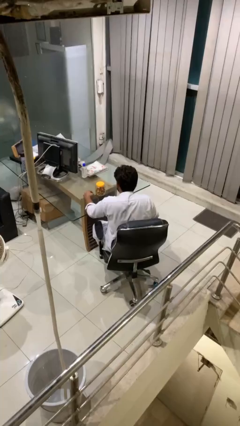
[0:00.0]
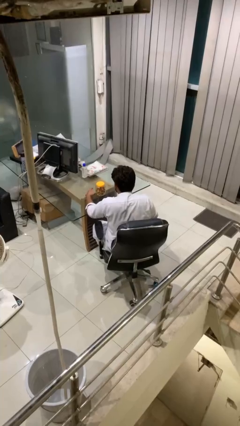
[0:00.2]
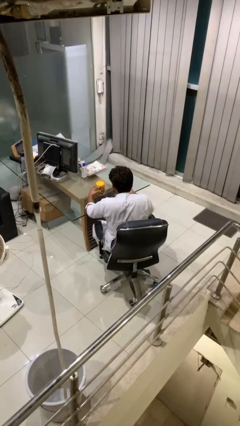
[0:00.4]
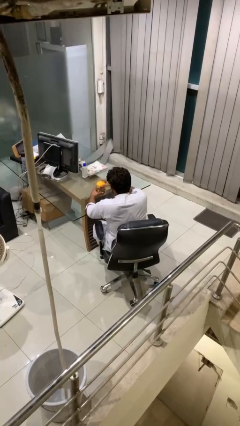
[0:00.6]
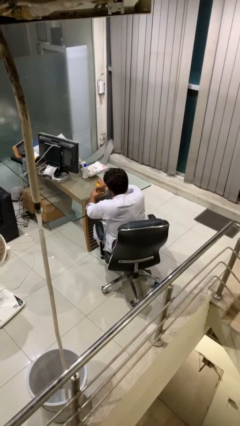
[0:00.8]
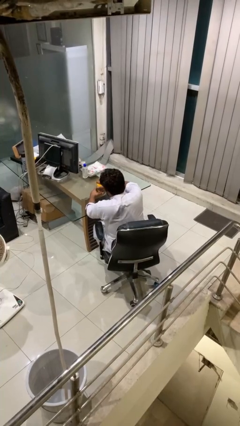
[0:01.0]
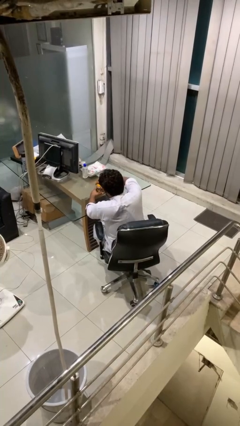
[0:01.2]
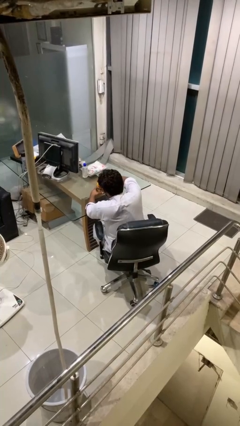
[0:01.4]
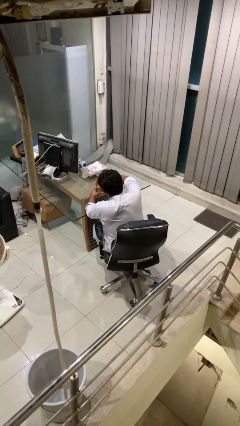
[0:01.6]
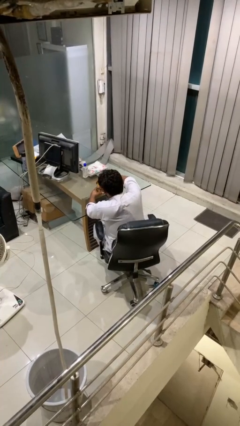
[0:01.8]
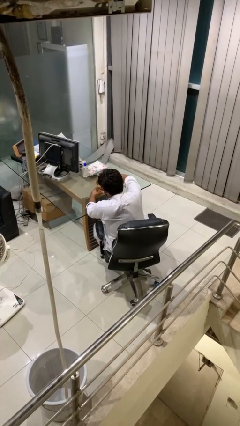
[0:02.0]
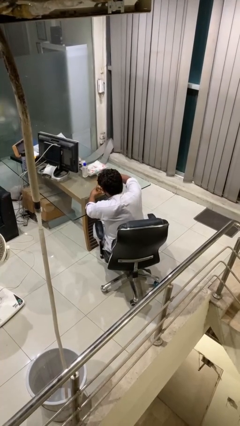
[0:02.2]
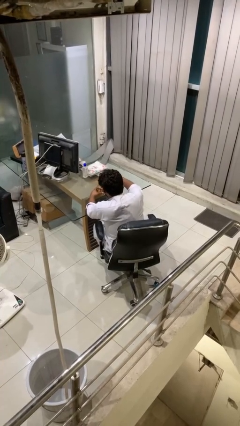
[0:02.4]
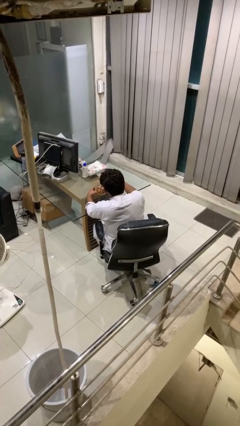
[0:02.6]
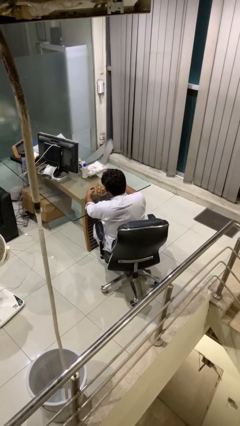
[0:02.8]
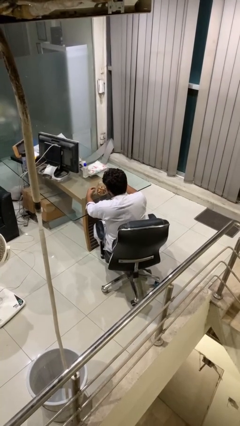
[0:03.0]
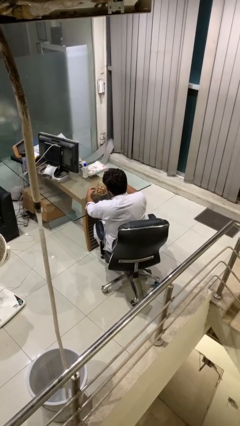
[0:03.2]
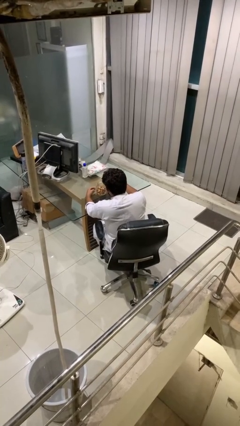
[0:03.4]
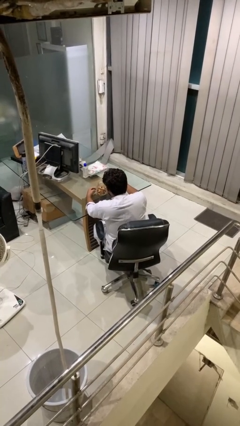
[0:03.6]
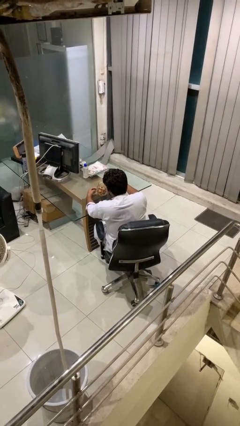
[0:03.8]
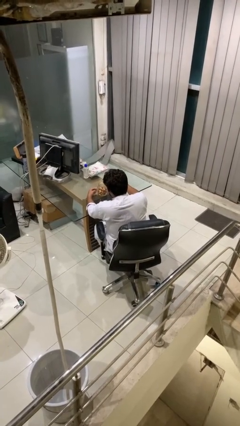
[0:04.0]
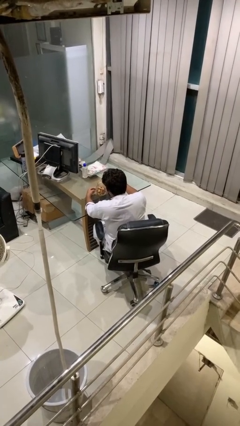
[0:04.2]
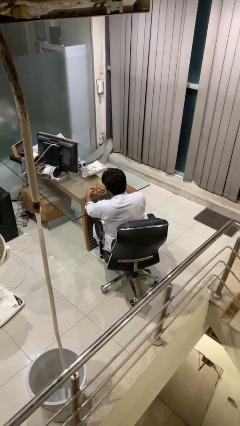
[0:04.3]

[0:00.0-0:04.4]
person opens jar

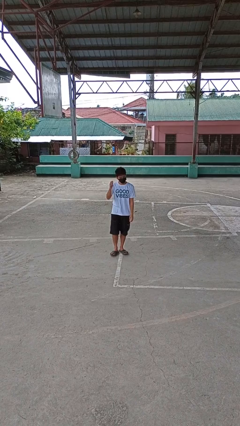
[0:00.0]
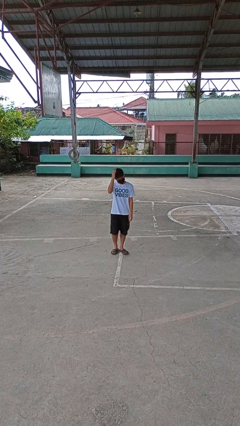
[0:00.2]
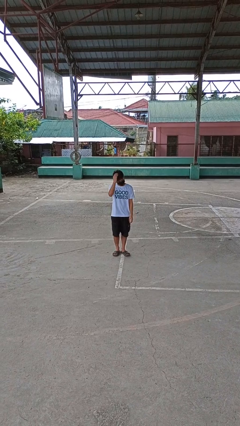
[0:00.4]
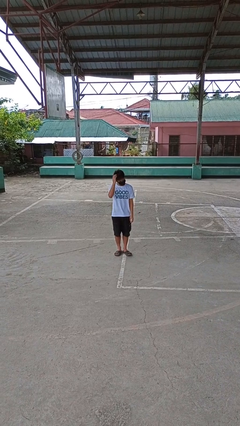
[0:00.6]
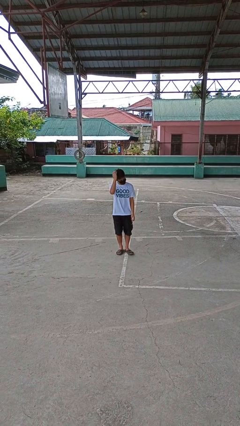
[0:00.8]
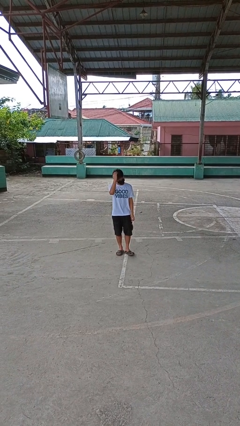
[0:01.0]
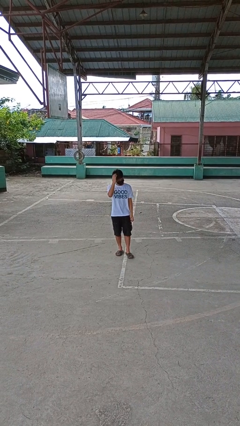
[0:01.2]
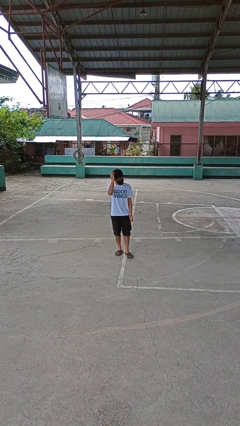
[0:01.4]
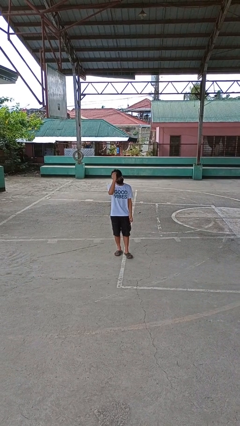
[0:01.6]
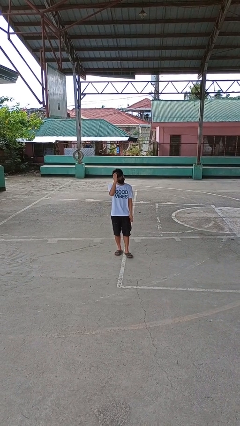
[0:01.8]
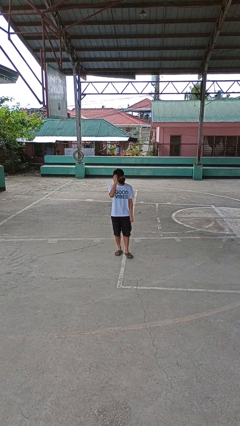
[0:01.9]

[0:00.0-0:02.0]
person pats head

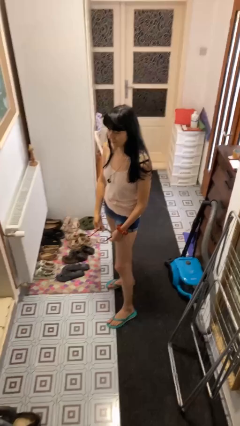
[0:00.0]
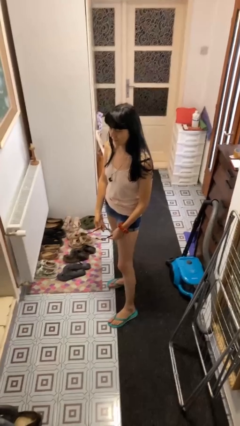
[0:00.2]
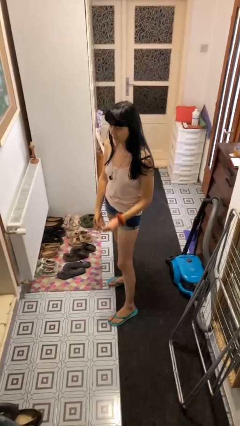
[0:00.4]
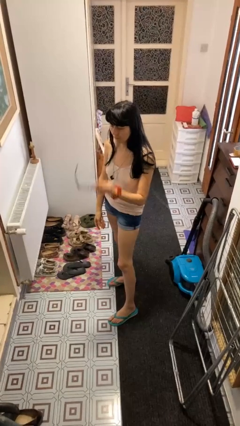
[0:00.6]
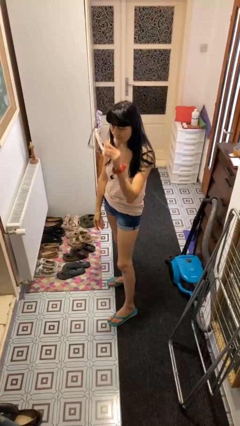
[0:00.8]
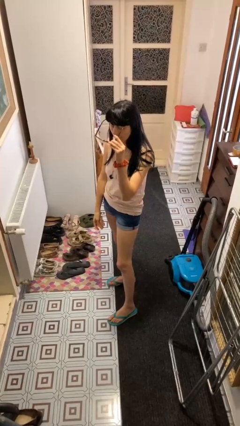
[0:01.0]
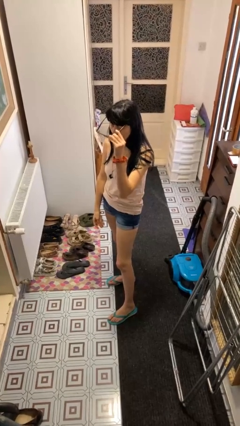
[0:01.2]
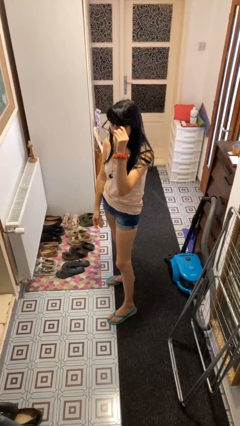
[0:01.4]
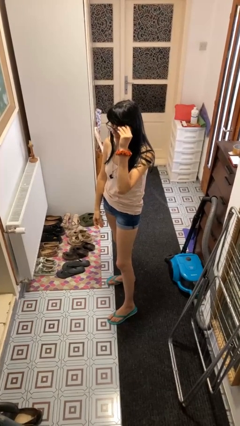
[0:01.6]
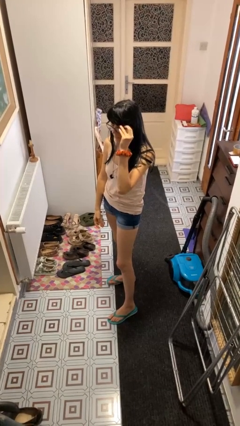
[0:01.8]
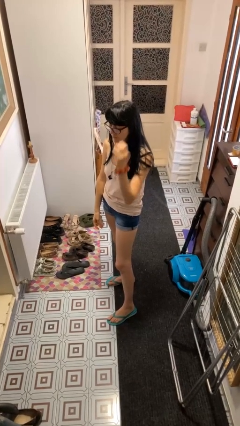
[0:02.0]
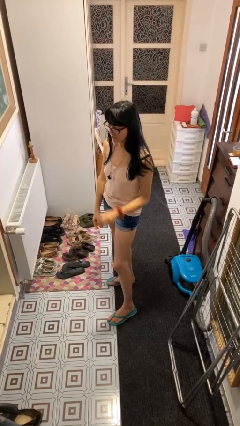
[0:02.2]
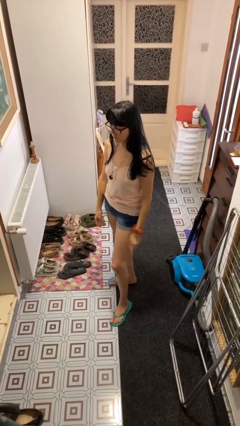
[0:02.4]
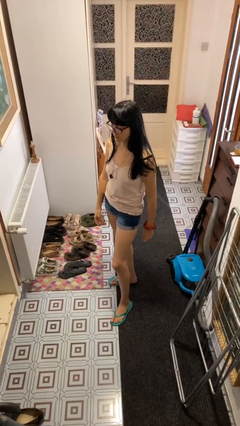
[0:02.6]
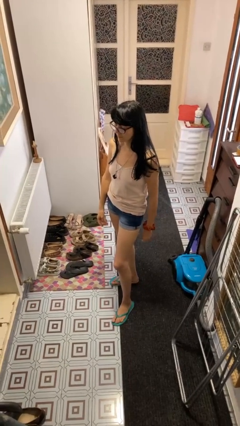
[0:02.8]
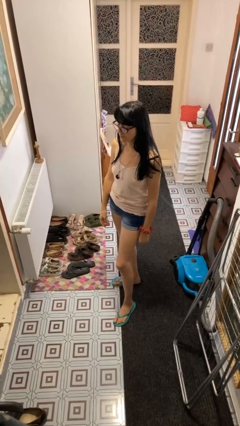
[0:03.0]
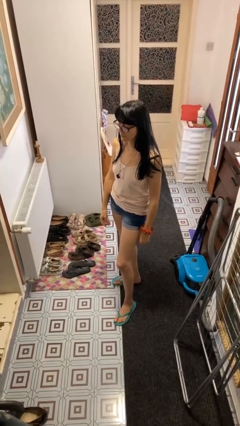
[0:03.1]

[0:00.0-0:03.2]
person puts on glasses

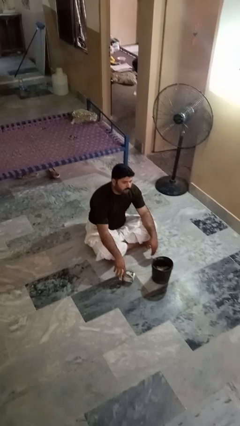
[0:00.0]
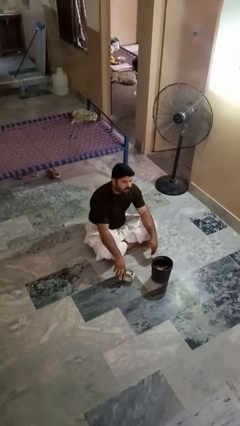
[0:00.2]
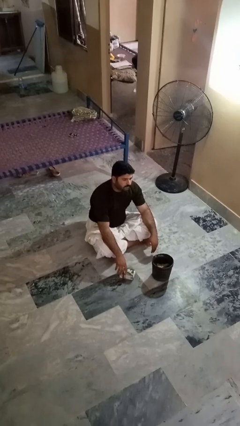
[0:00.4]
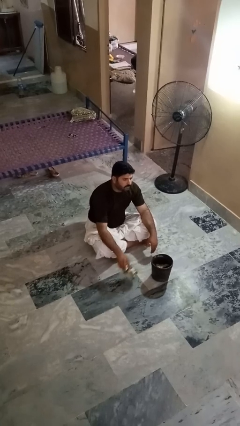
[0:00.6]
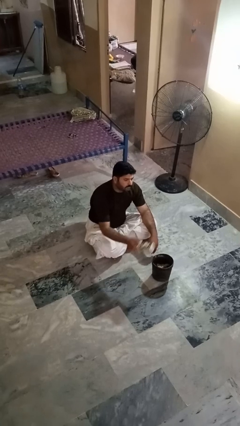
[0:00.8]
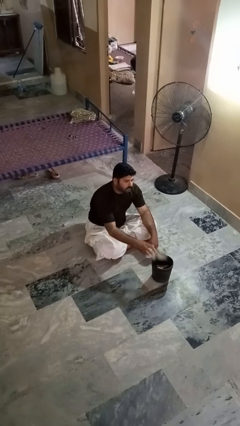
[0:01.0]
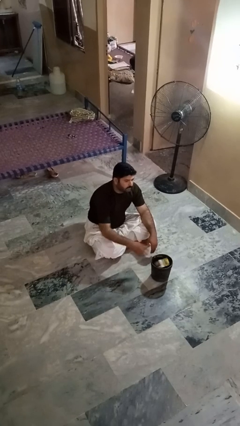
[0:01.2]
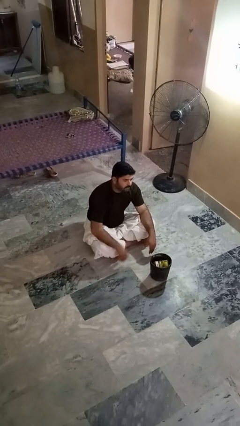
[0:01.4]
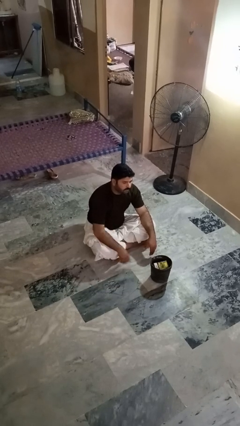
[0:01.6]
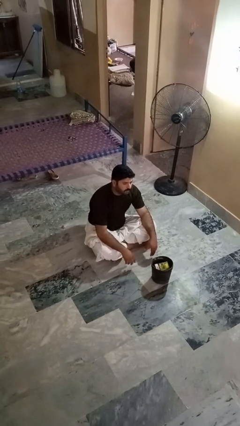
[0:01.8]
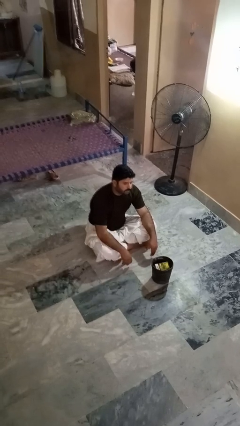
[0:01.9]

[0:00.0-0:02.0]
person puts object into basket

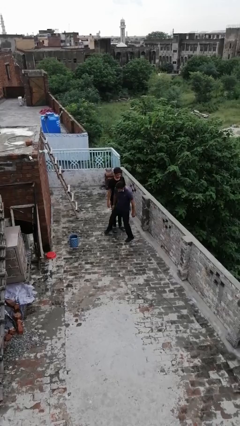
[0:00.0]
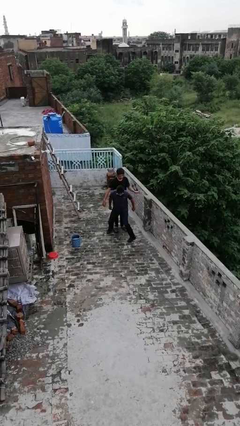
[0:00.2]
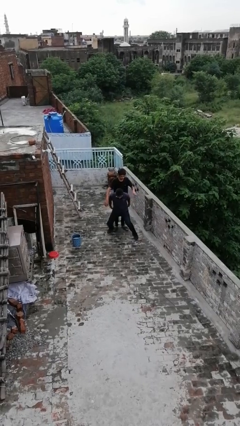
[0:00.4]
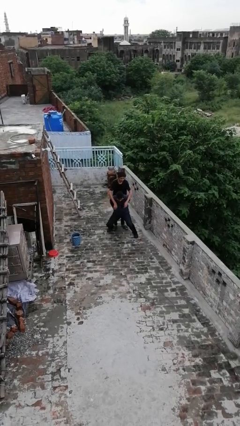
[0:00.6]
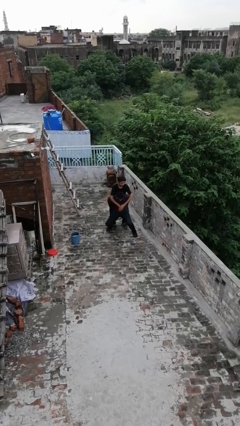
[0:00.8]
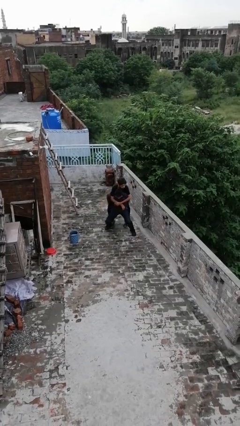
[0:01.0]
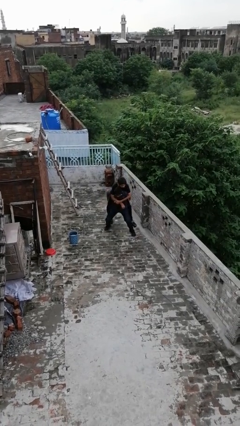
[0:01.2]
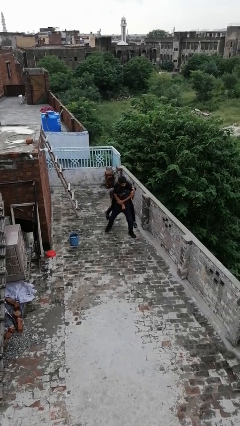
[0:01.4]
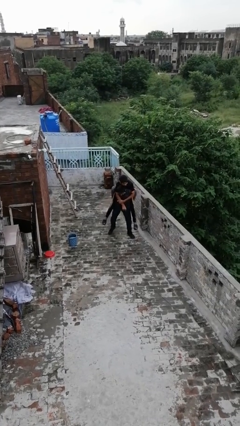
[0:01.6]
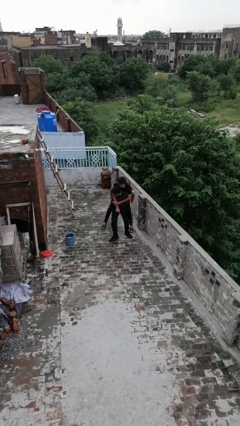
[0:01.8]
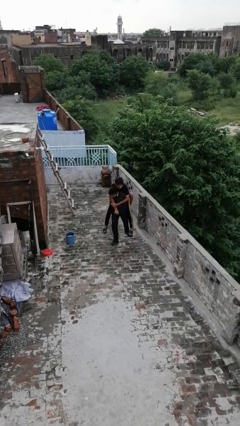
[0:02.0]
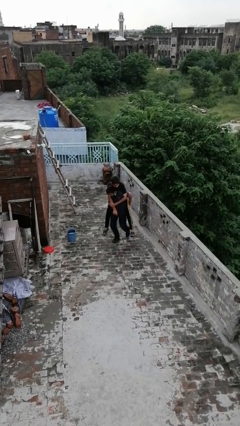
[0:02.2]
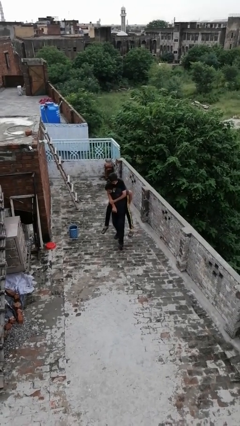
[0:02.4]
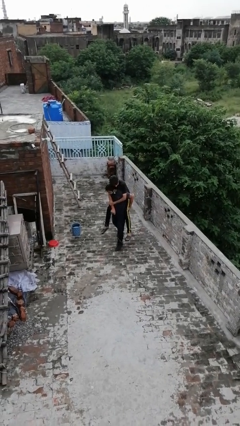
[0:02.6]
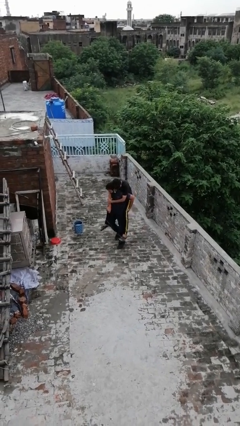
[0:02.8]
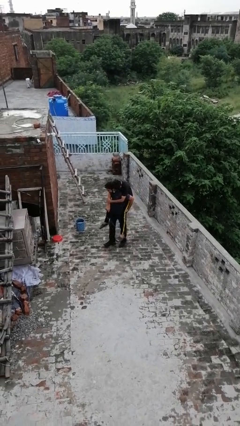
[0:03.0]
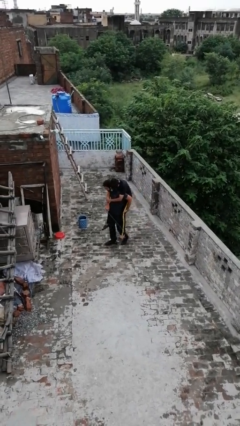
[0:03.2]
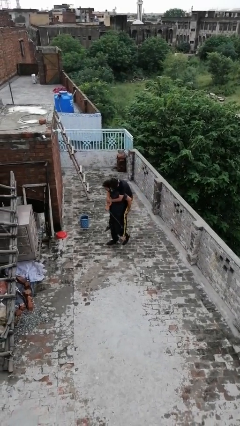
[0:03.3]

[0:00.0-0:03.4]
person carries person on back

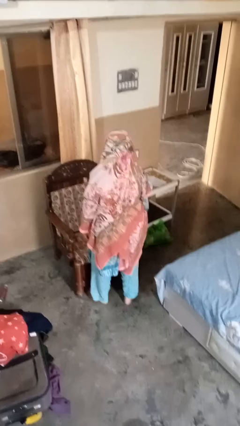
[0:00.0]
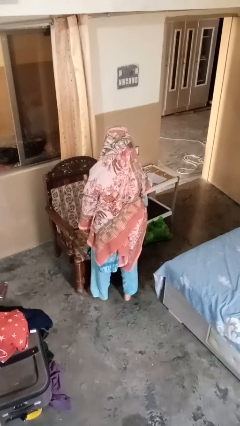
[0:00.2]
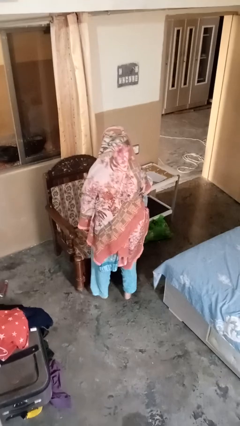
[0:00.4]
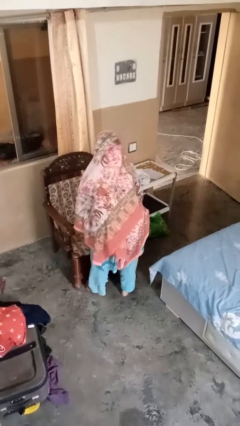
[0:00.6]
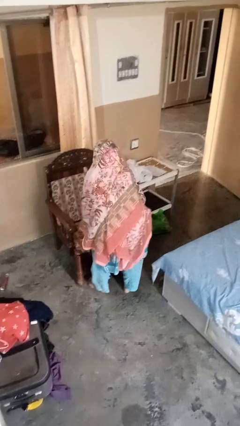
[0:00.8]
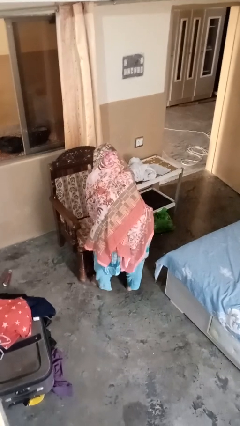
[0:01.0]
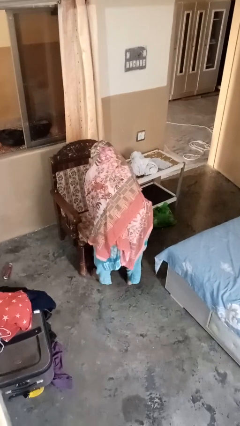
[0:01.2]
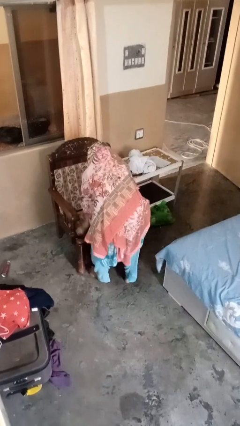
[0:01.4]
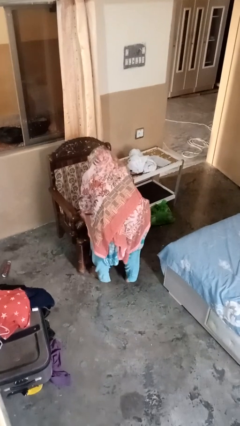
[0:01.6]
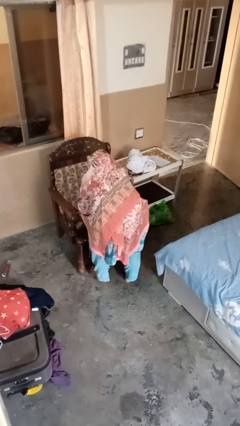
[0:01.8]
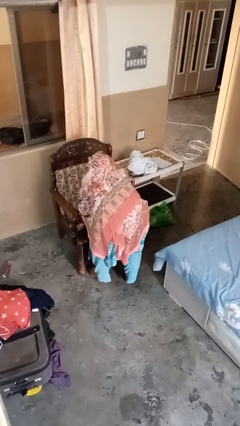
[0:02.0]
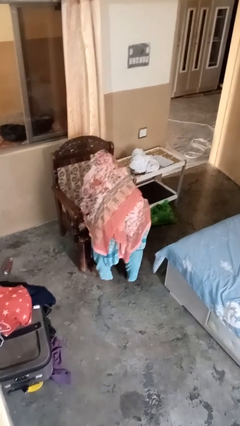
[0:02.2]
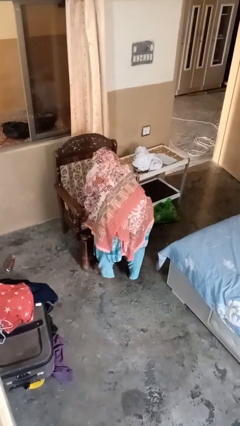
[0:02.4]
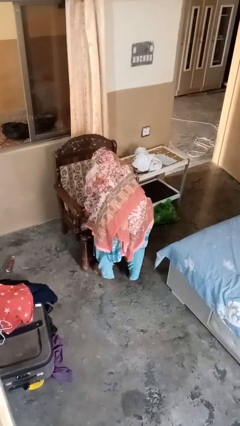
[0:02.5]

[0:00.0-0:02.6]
person searches under couch
